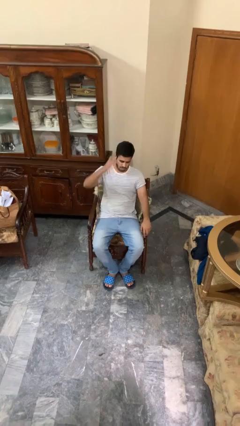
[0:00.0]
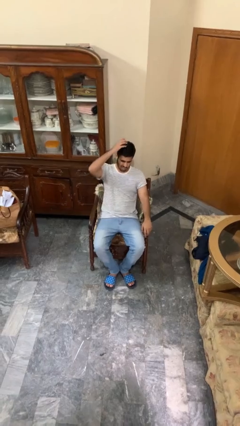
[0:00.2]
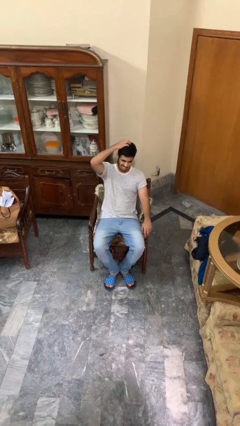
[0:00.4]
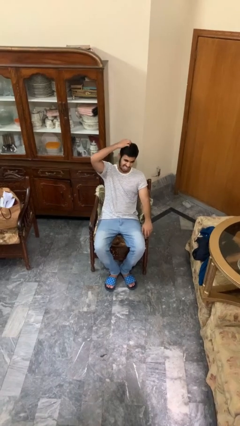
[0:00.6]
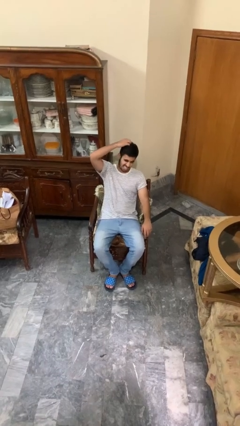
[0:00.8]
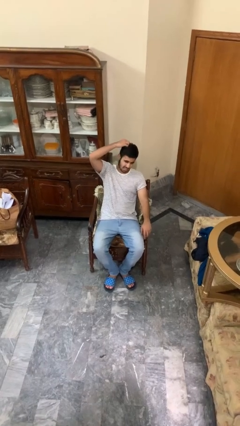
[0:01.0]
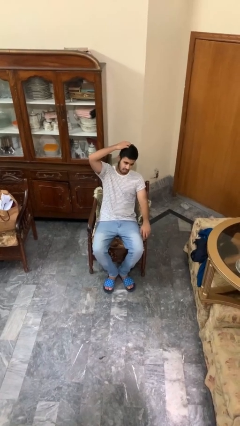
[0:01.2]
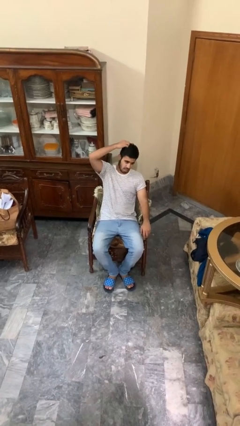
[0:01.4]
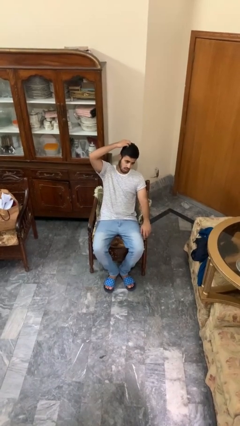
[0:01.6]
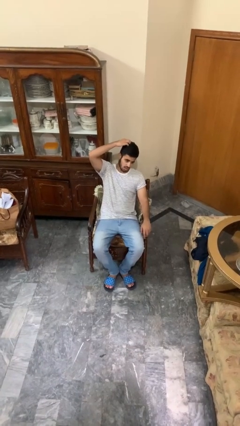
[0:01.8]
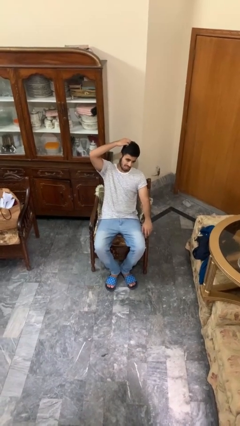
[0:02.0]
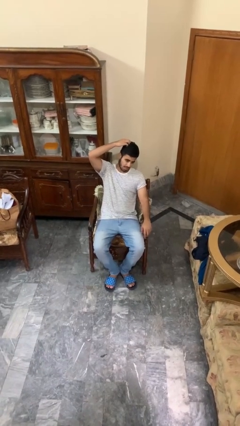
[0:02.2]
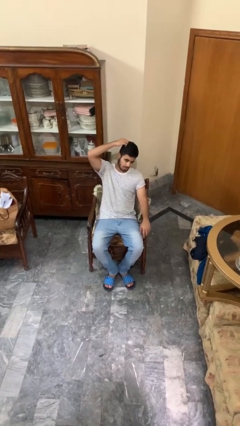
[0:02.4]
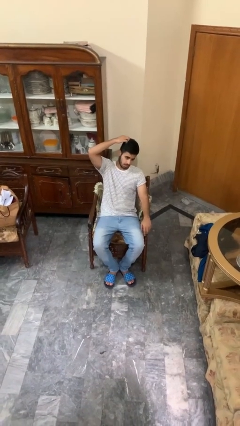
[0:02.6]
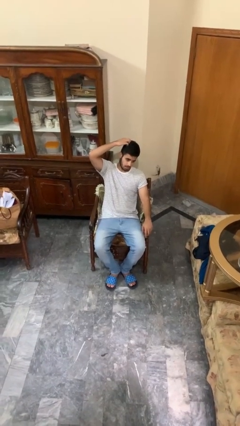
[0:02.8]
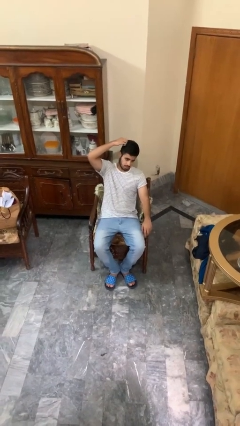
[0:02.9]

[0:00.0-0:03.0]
person strokes hair

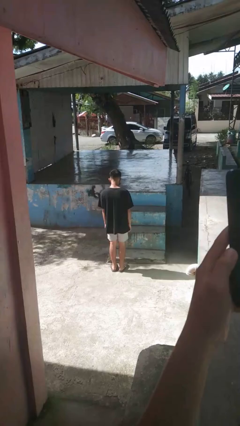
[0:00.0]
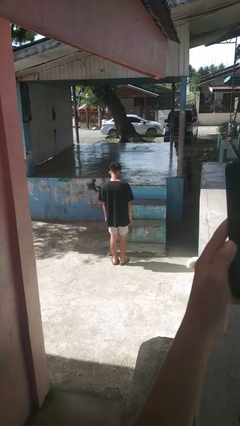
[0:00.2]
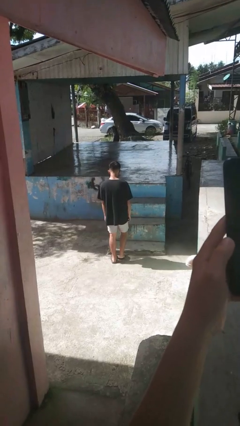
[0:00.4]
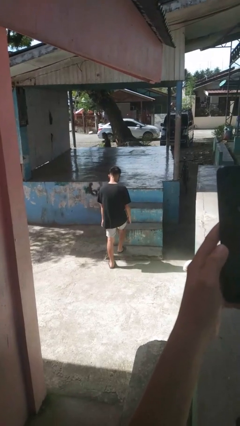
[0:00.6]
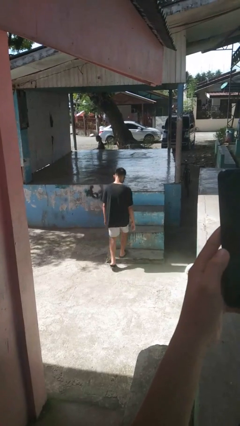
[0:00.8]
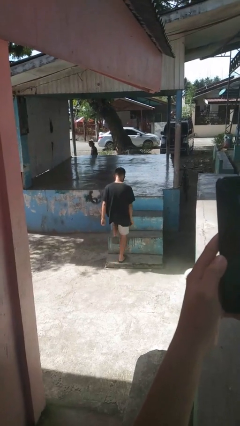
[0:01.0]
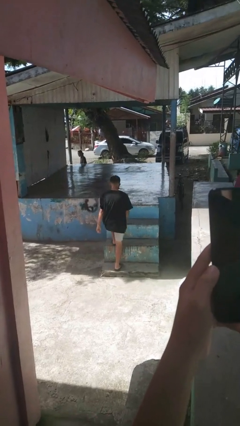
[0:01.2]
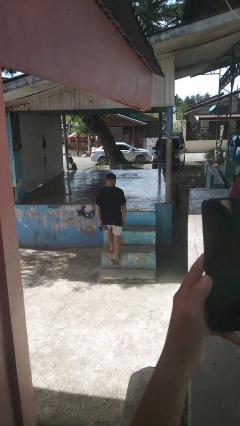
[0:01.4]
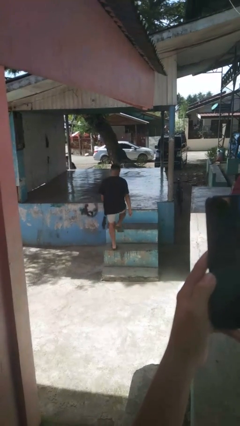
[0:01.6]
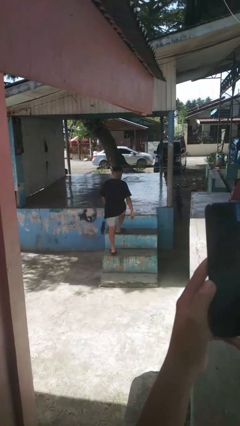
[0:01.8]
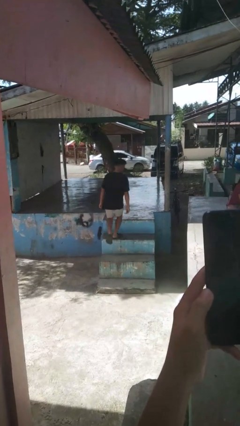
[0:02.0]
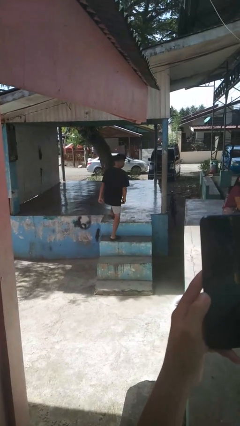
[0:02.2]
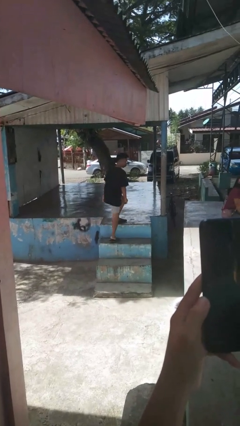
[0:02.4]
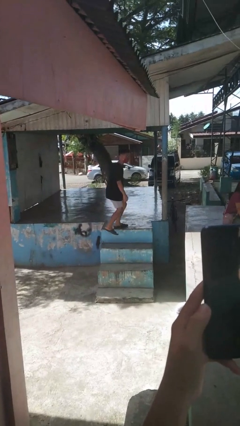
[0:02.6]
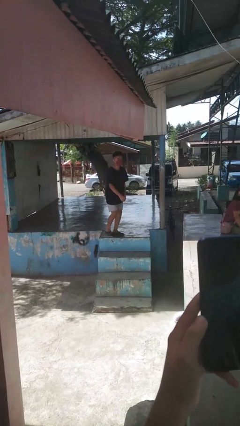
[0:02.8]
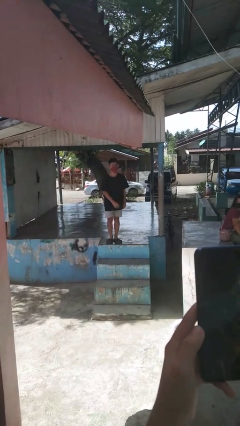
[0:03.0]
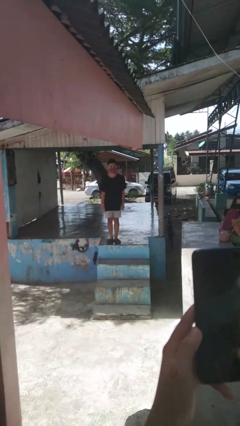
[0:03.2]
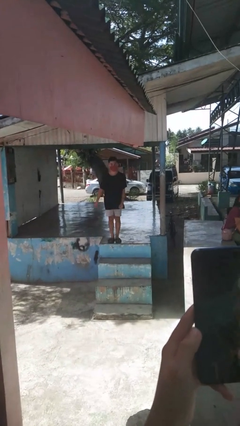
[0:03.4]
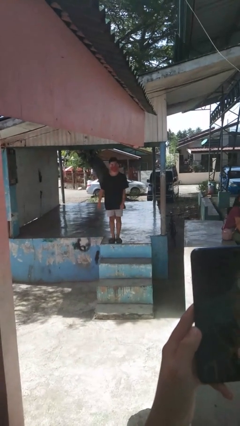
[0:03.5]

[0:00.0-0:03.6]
person climbs up stairs

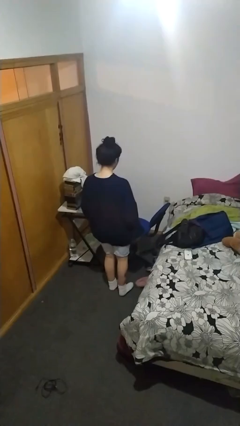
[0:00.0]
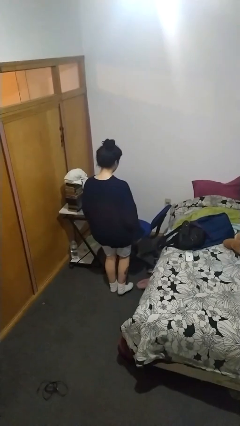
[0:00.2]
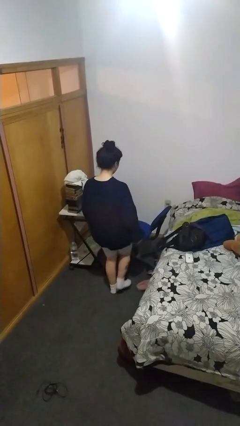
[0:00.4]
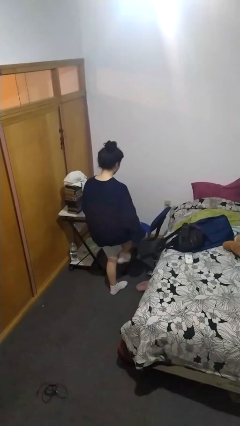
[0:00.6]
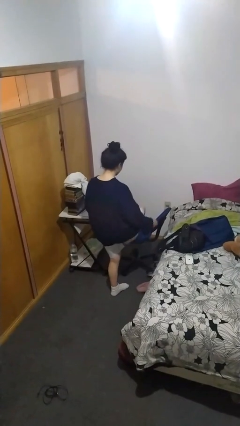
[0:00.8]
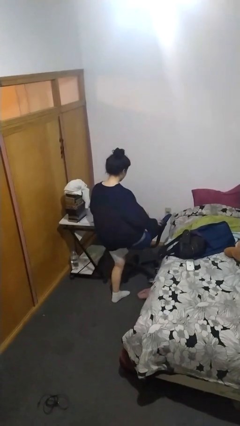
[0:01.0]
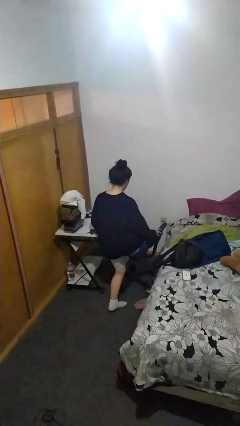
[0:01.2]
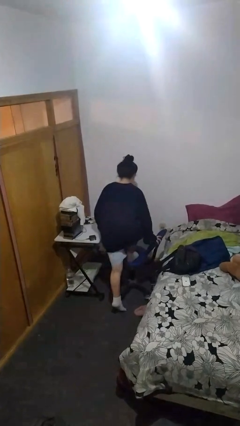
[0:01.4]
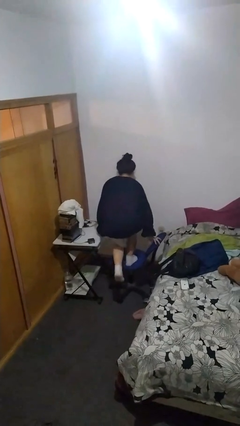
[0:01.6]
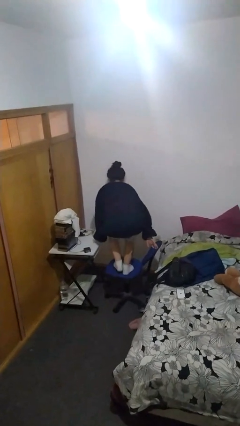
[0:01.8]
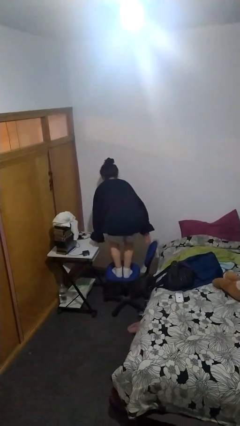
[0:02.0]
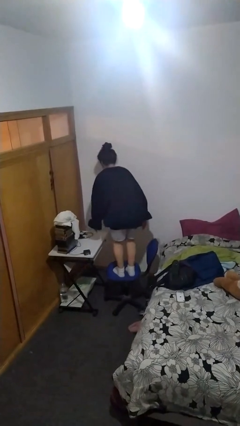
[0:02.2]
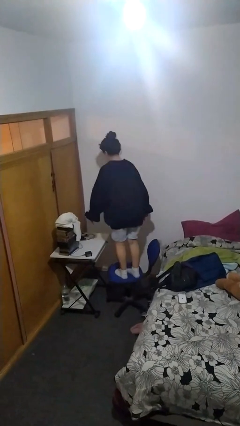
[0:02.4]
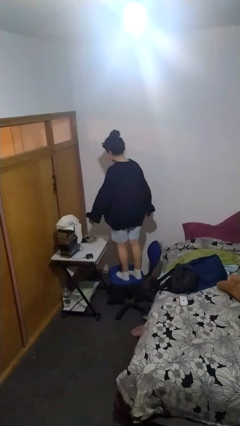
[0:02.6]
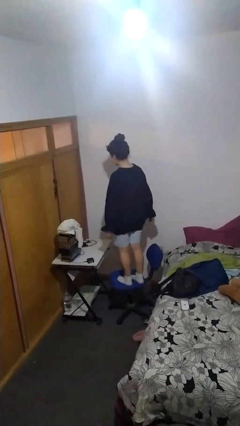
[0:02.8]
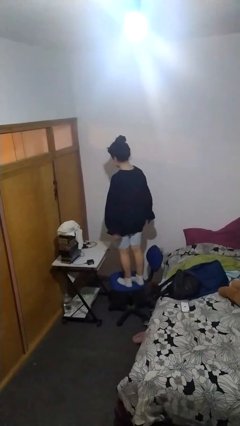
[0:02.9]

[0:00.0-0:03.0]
person climbs on chair

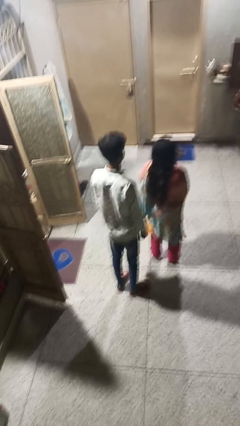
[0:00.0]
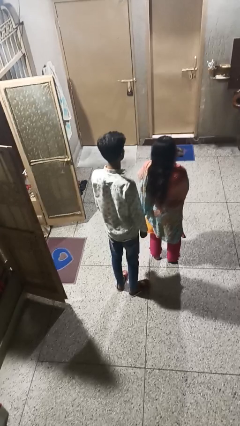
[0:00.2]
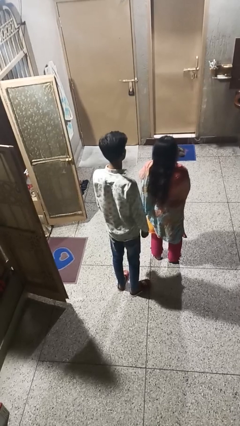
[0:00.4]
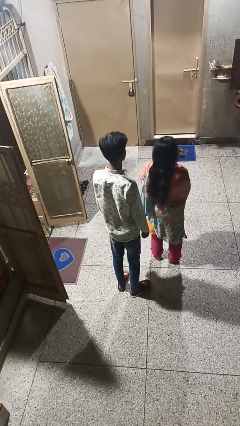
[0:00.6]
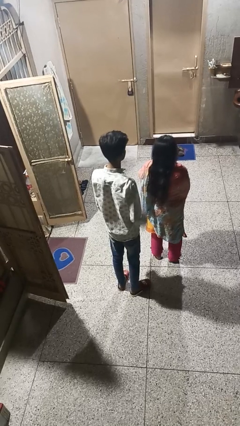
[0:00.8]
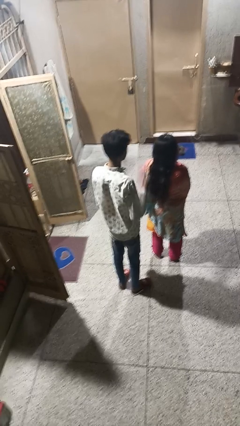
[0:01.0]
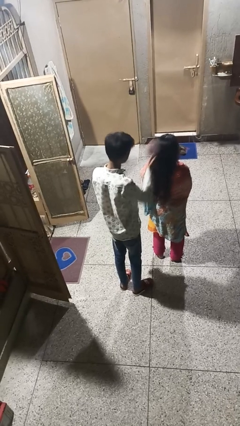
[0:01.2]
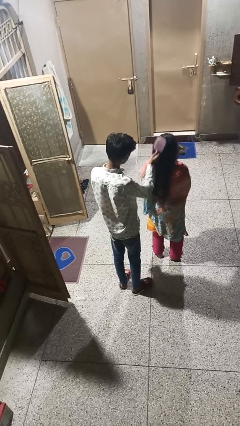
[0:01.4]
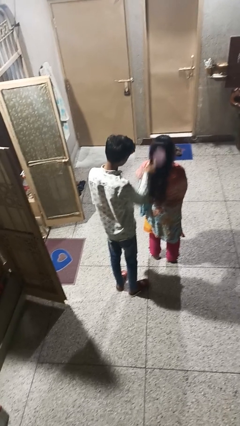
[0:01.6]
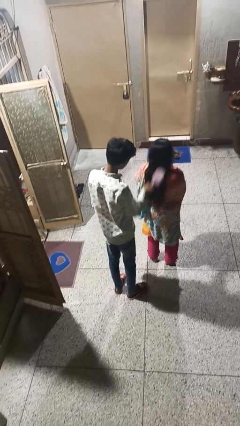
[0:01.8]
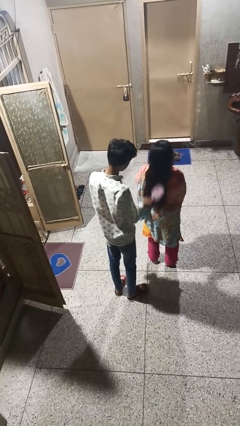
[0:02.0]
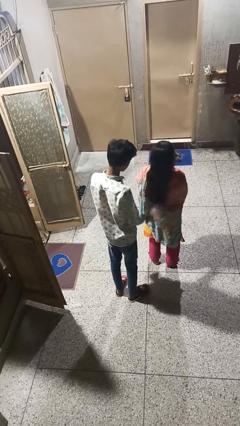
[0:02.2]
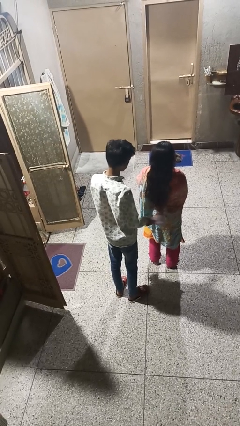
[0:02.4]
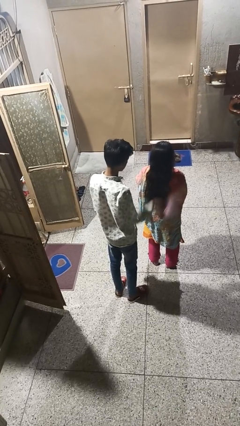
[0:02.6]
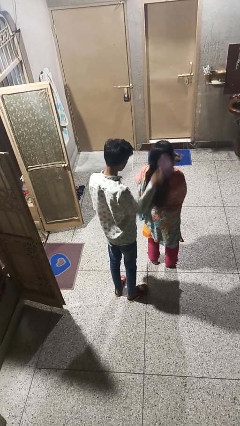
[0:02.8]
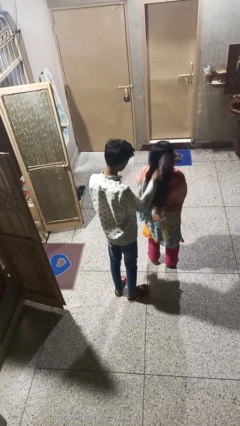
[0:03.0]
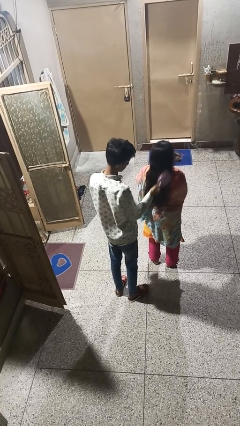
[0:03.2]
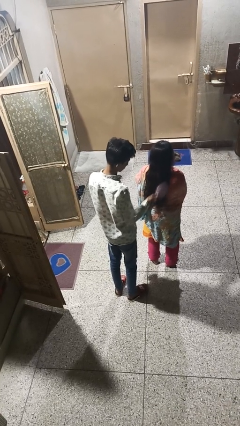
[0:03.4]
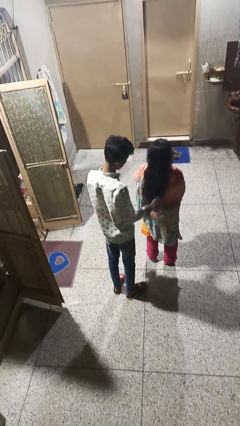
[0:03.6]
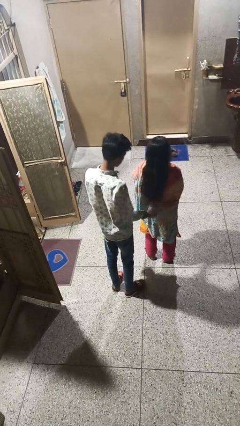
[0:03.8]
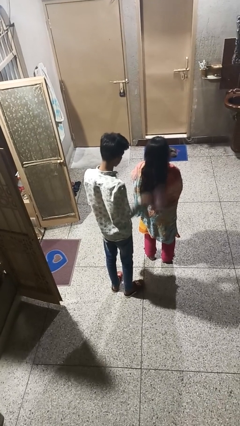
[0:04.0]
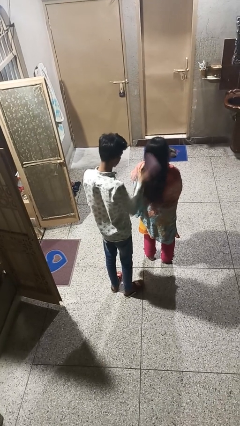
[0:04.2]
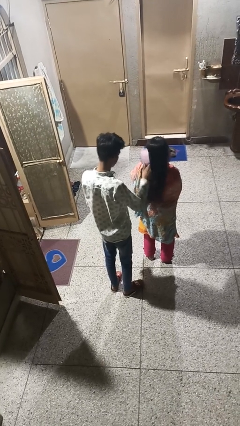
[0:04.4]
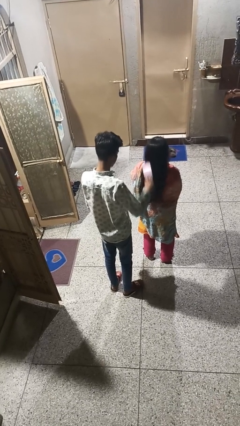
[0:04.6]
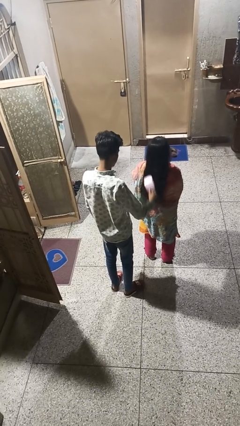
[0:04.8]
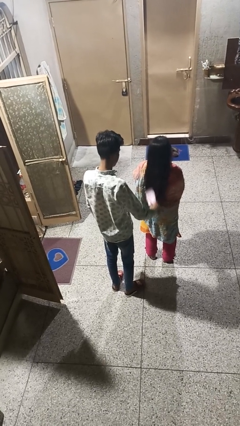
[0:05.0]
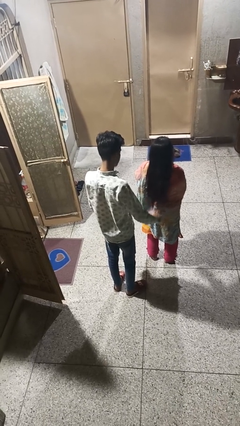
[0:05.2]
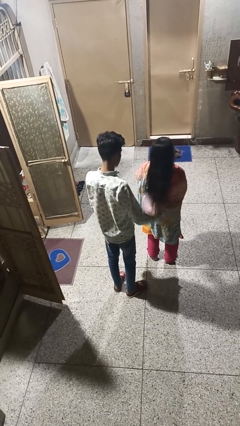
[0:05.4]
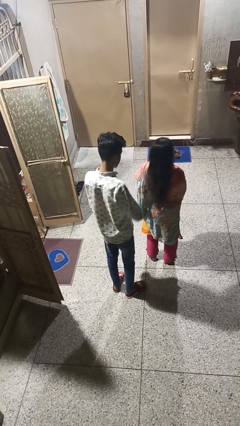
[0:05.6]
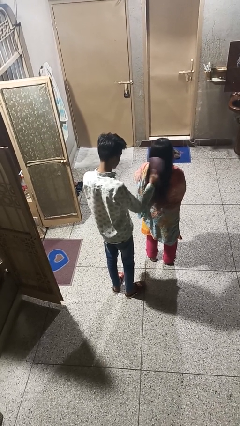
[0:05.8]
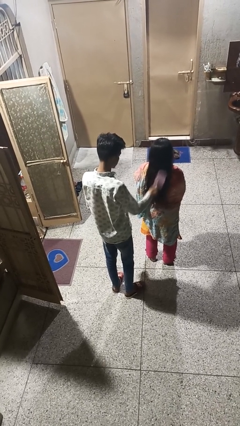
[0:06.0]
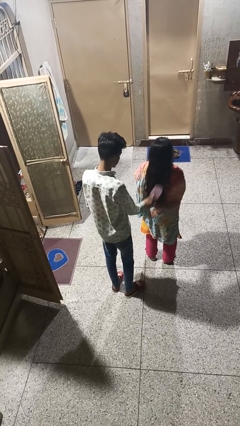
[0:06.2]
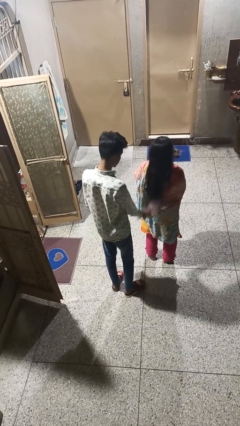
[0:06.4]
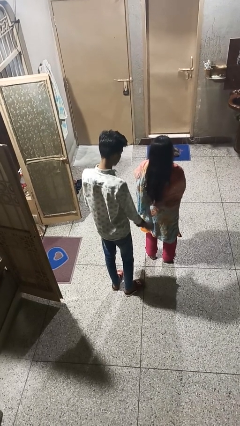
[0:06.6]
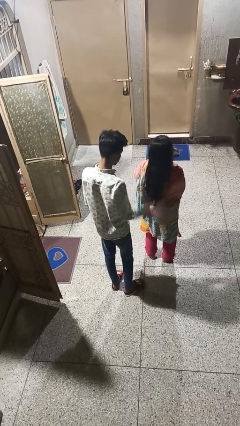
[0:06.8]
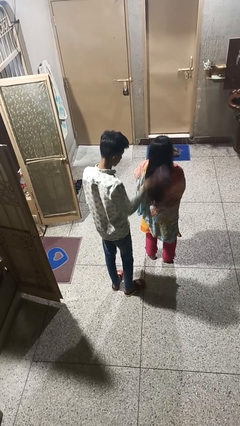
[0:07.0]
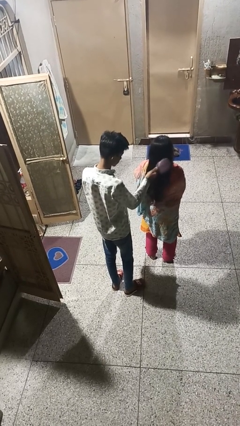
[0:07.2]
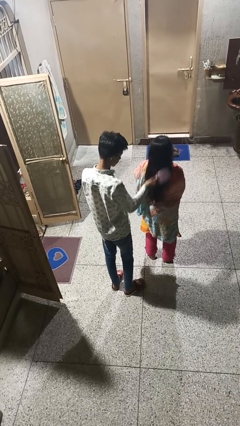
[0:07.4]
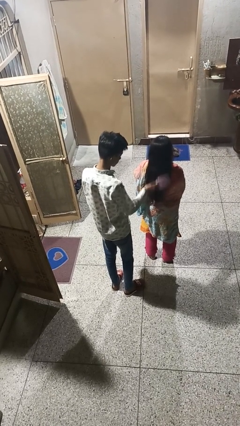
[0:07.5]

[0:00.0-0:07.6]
person brushes hair of person

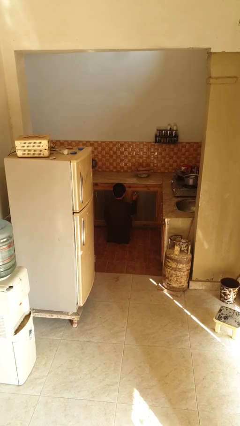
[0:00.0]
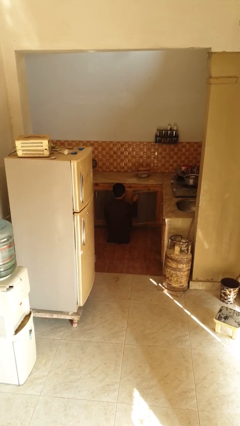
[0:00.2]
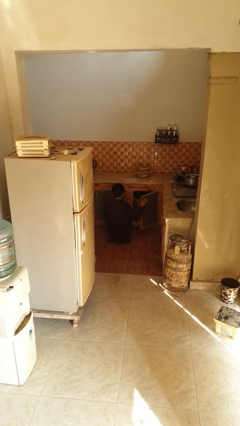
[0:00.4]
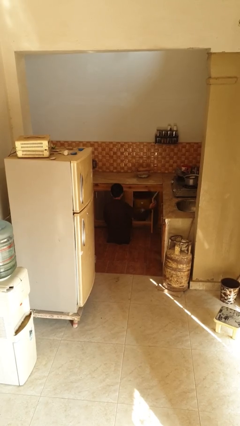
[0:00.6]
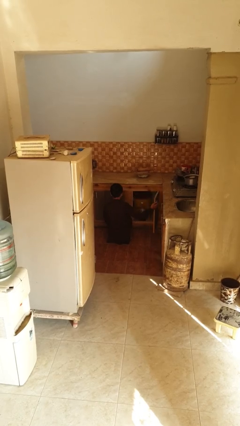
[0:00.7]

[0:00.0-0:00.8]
person opens kitchen drawer
